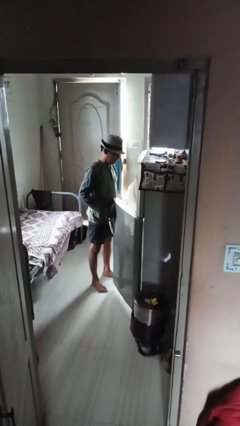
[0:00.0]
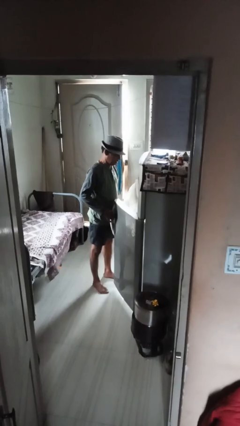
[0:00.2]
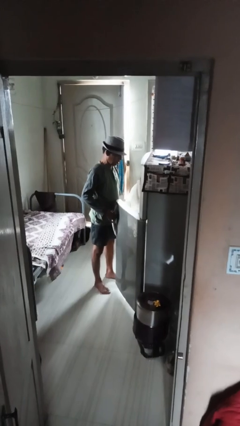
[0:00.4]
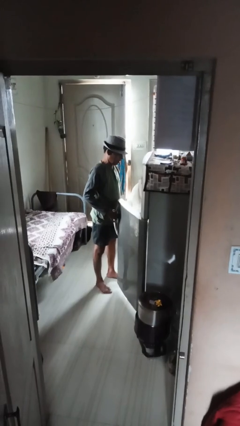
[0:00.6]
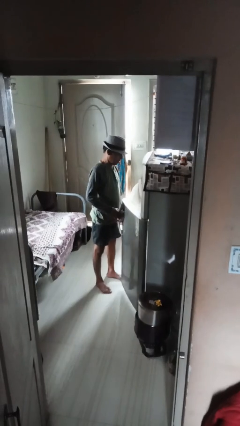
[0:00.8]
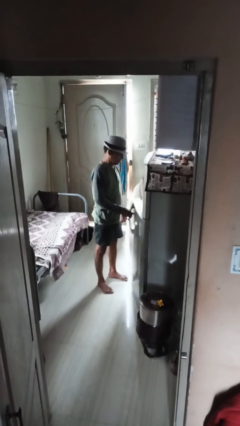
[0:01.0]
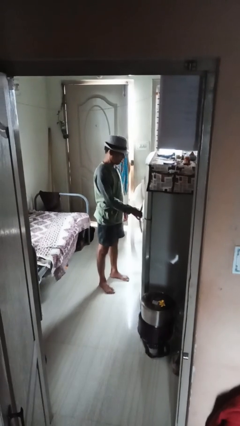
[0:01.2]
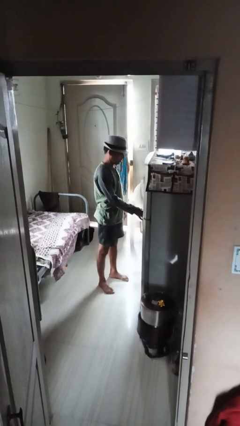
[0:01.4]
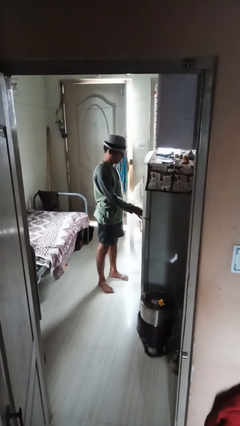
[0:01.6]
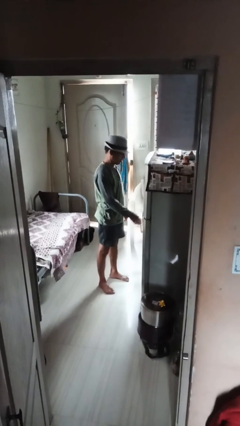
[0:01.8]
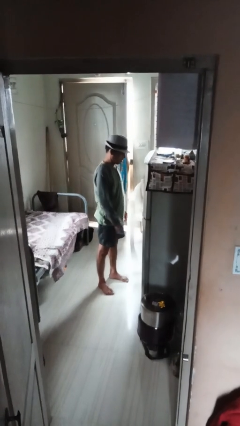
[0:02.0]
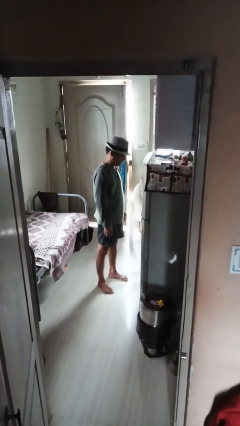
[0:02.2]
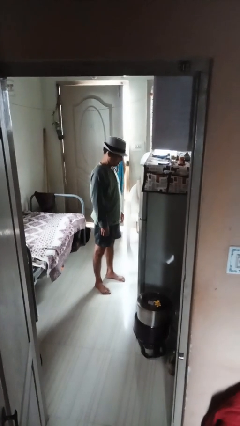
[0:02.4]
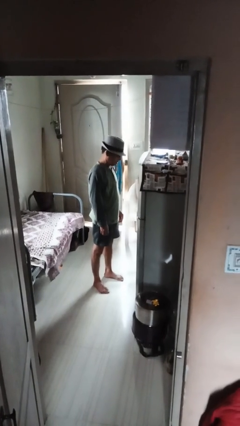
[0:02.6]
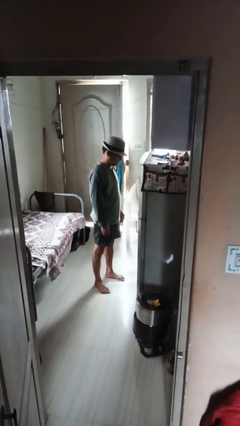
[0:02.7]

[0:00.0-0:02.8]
person closes refrigerator

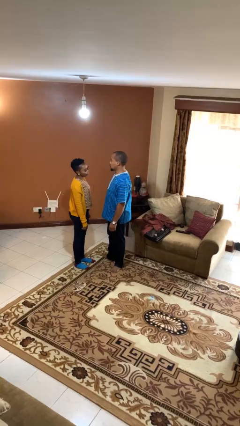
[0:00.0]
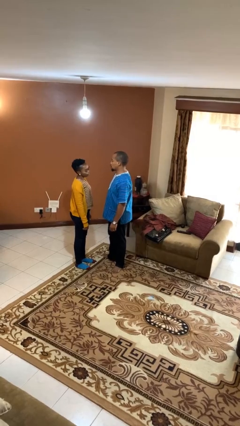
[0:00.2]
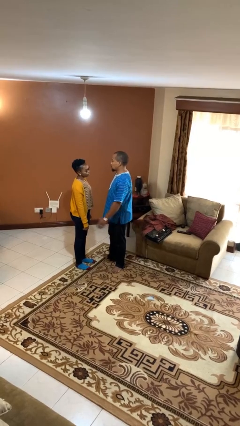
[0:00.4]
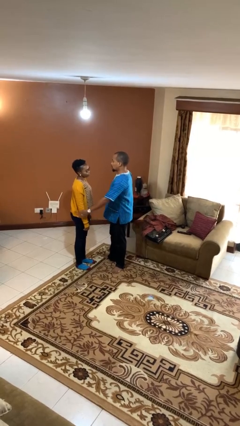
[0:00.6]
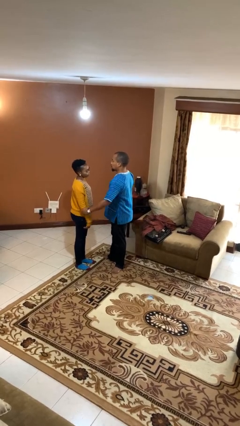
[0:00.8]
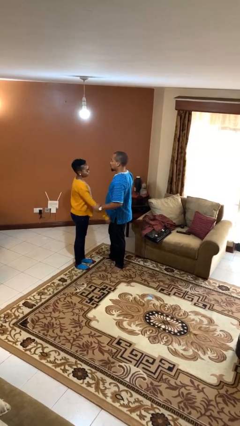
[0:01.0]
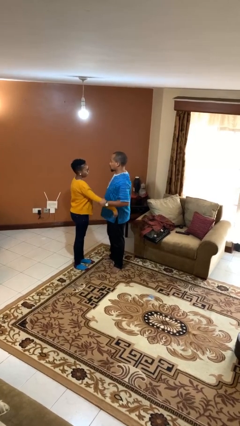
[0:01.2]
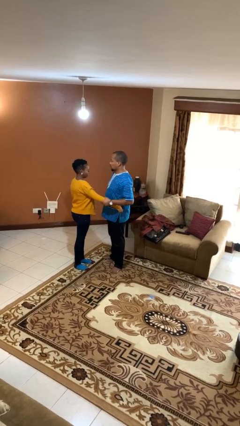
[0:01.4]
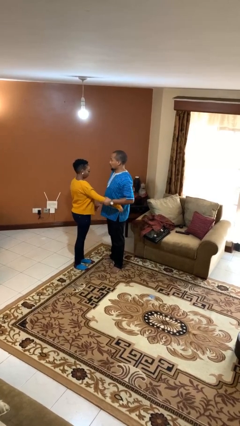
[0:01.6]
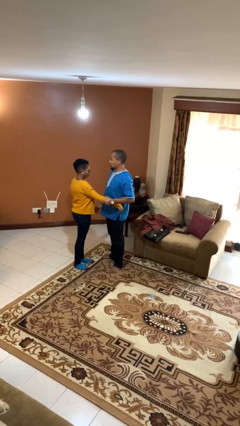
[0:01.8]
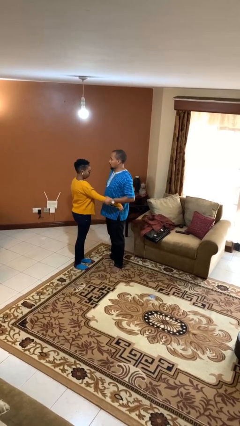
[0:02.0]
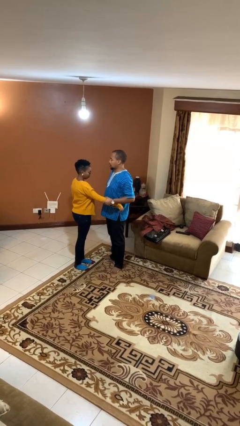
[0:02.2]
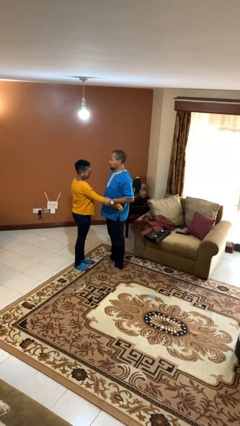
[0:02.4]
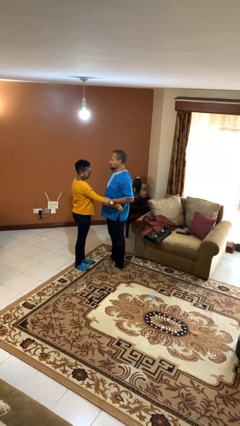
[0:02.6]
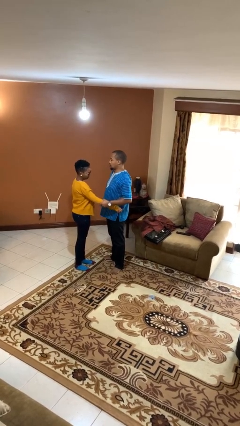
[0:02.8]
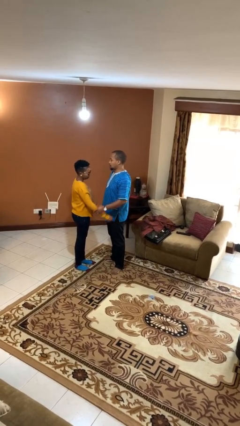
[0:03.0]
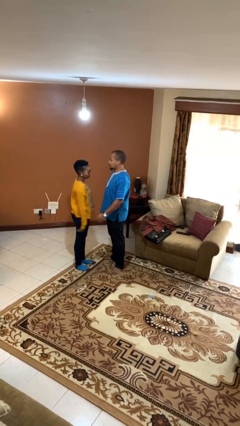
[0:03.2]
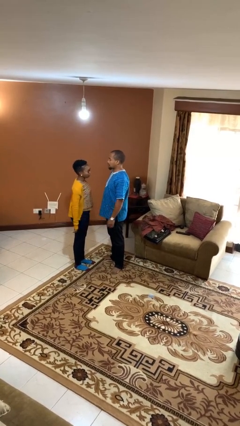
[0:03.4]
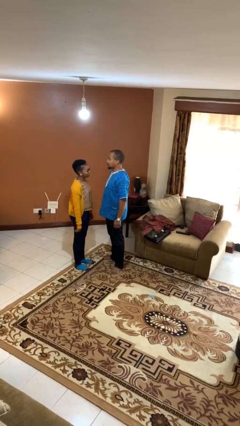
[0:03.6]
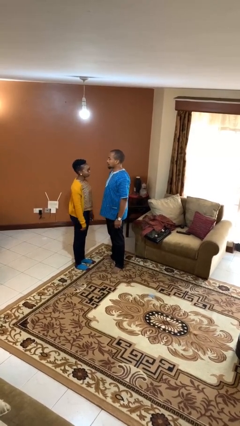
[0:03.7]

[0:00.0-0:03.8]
person grabs person by forearm

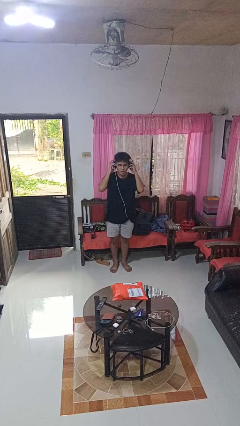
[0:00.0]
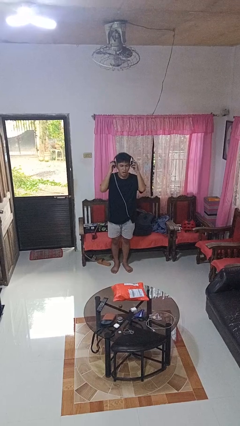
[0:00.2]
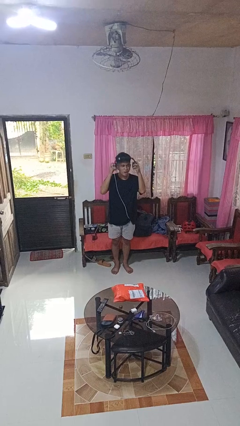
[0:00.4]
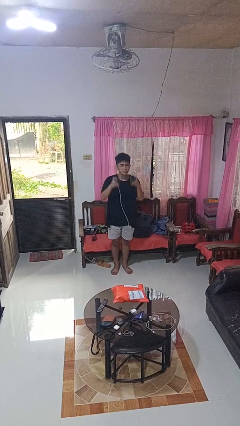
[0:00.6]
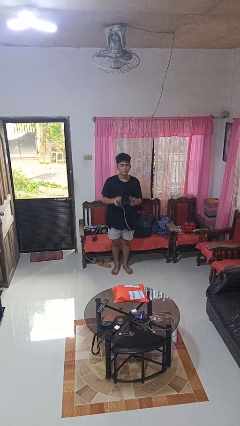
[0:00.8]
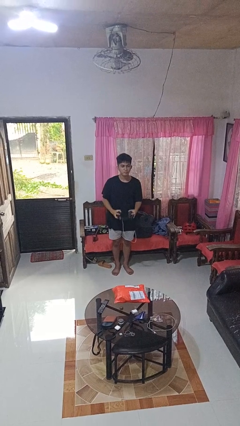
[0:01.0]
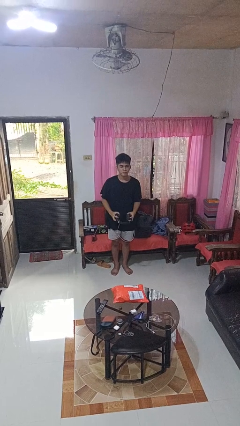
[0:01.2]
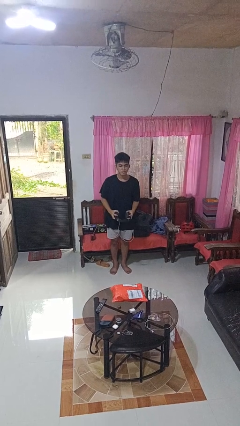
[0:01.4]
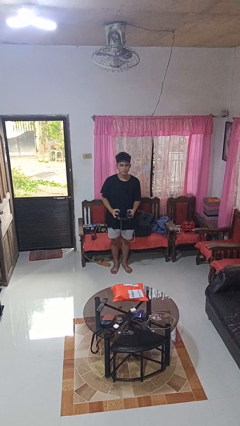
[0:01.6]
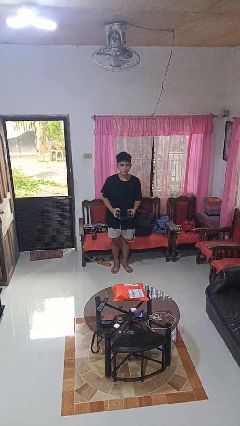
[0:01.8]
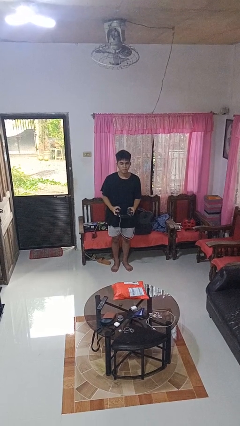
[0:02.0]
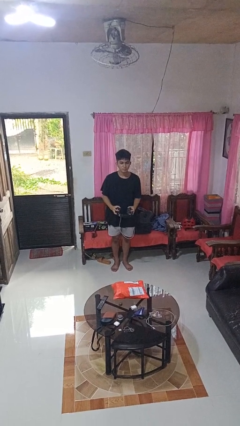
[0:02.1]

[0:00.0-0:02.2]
person takes off headphones

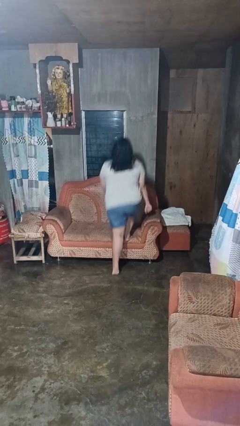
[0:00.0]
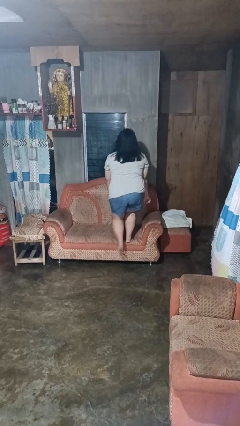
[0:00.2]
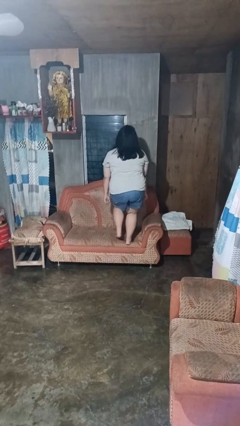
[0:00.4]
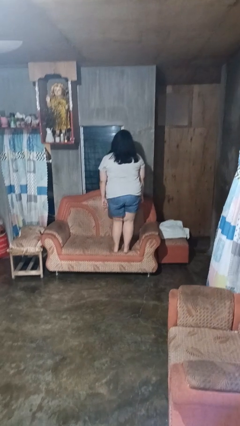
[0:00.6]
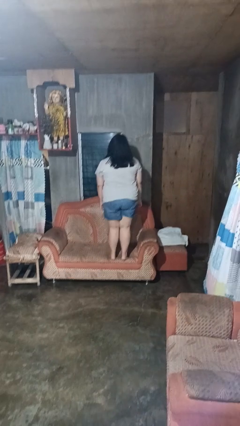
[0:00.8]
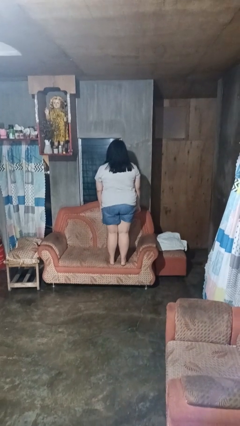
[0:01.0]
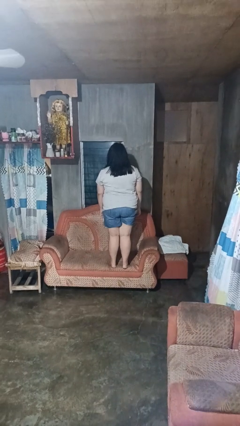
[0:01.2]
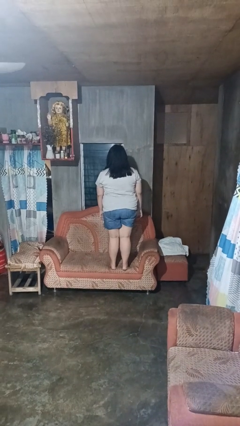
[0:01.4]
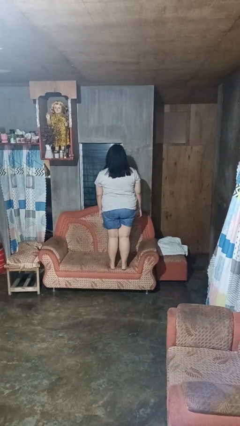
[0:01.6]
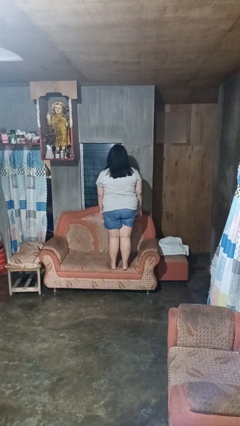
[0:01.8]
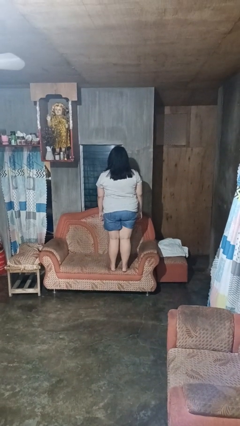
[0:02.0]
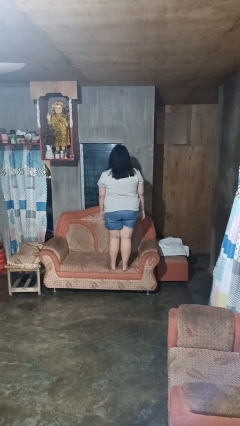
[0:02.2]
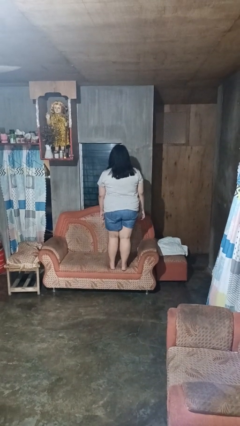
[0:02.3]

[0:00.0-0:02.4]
person climbs on couch

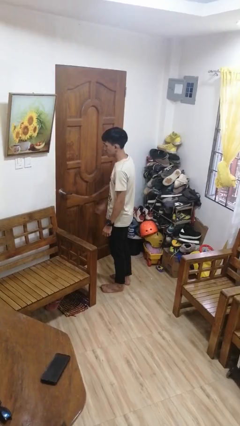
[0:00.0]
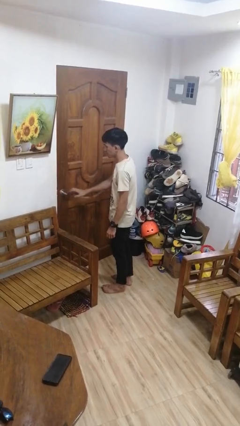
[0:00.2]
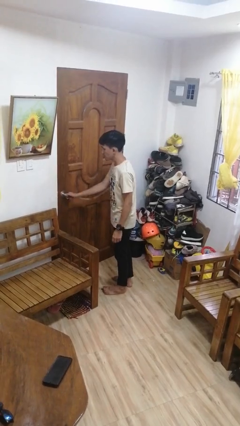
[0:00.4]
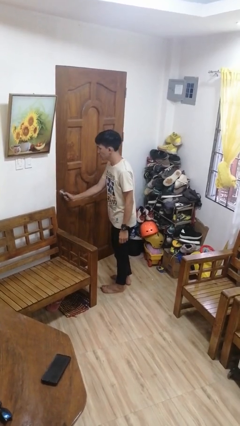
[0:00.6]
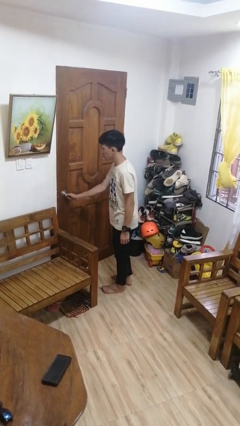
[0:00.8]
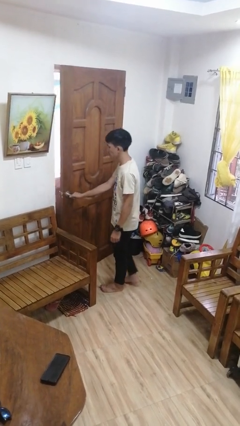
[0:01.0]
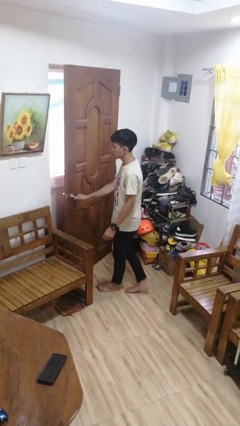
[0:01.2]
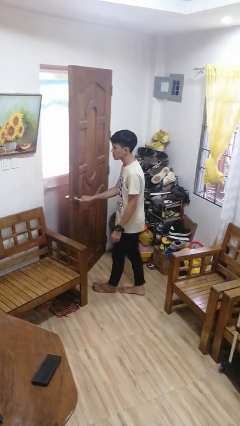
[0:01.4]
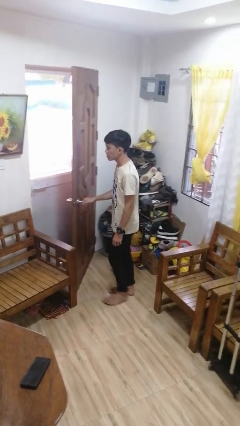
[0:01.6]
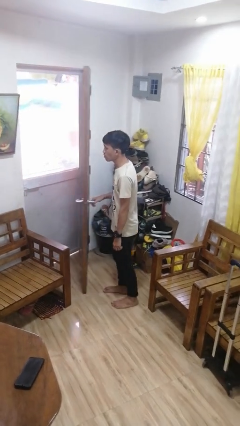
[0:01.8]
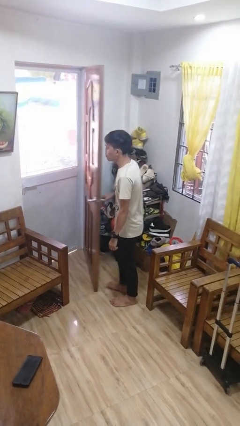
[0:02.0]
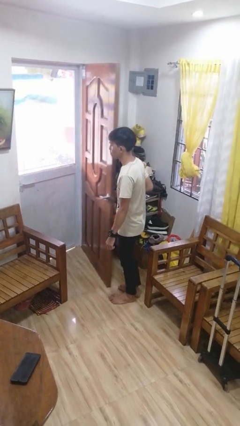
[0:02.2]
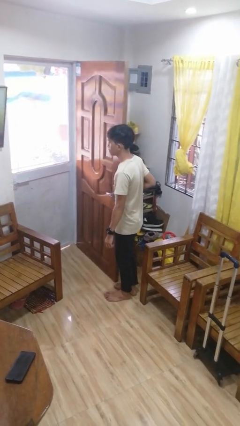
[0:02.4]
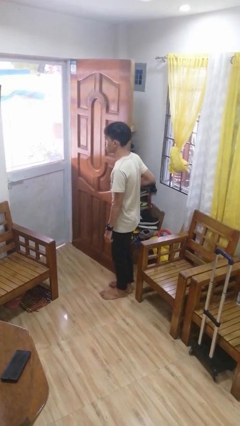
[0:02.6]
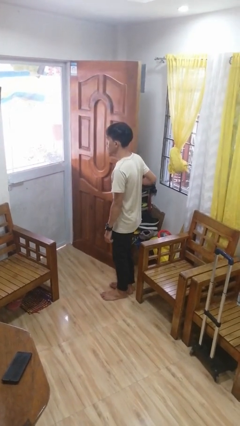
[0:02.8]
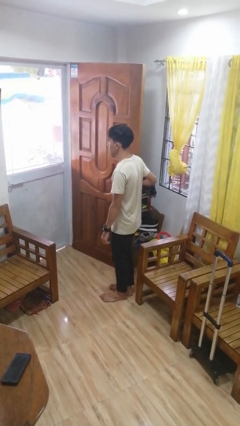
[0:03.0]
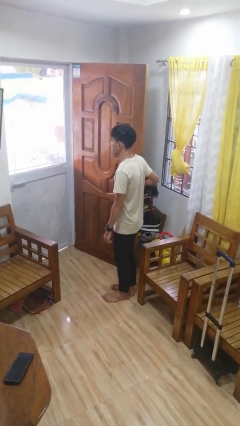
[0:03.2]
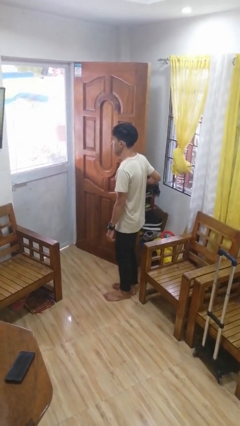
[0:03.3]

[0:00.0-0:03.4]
person opens facility door

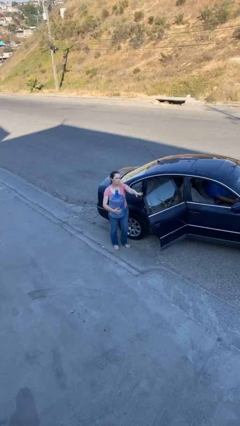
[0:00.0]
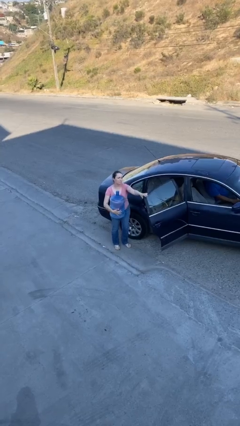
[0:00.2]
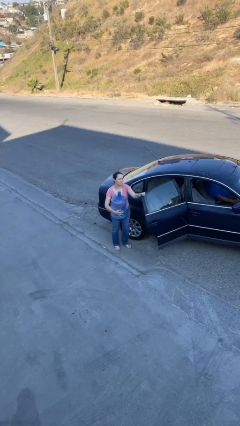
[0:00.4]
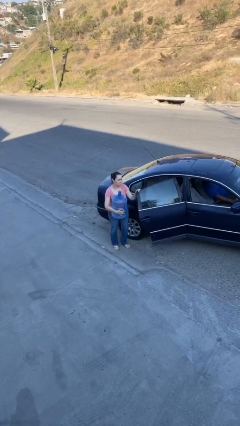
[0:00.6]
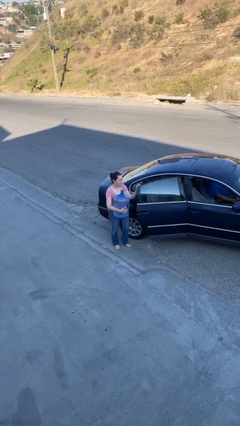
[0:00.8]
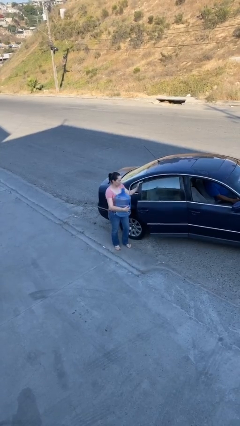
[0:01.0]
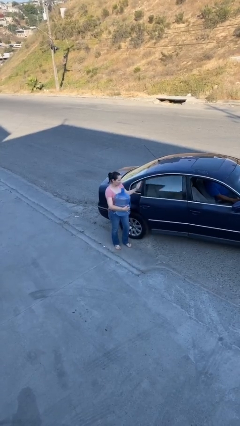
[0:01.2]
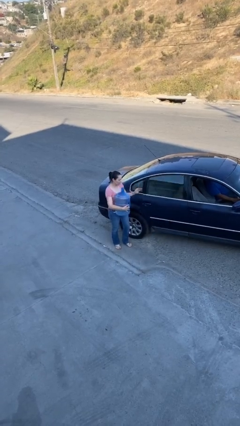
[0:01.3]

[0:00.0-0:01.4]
person closes car door

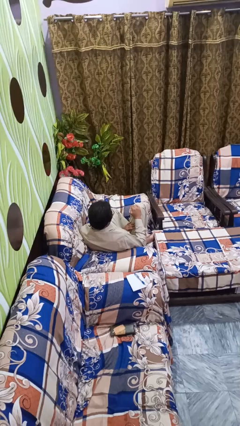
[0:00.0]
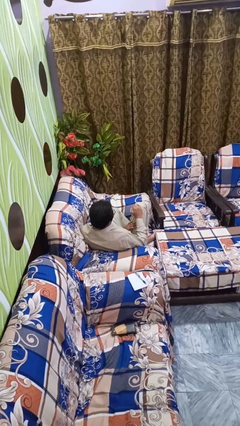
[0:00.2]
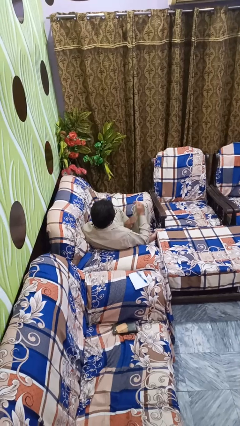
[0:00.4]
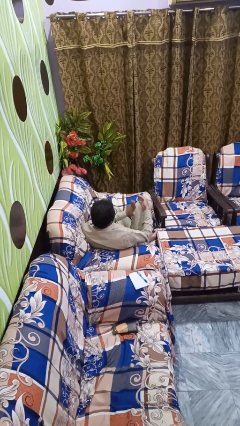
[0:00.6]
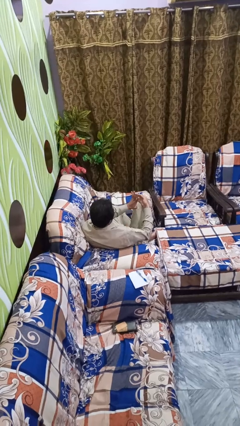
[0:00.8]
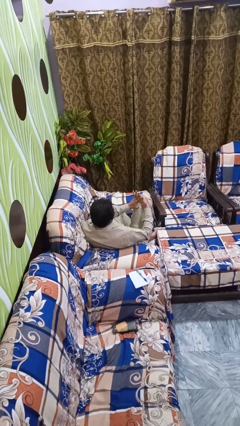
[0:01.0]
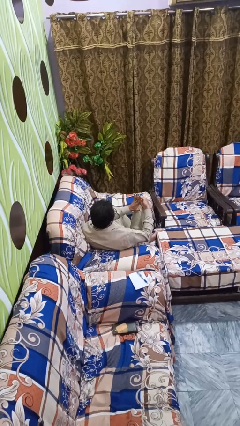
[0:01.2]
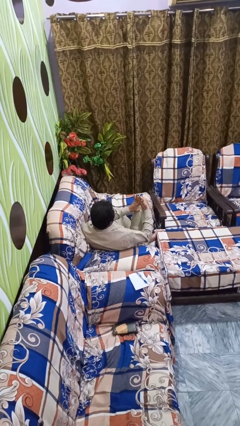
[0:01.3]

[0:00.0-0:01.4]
person gestures number five
